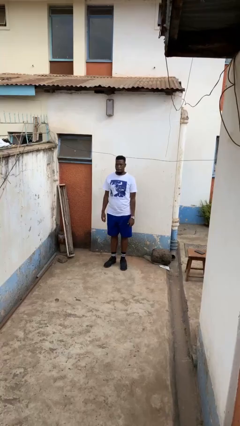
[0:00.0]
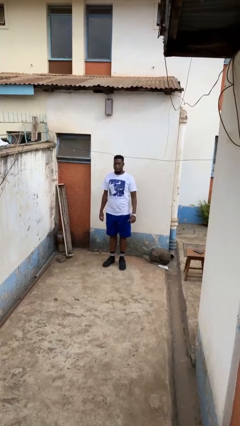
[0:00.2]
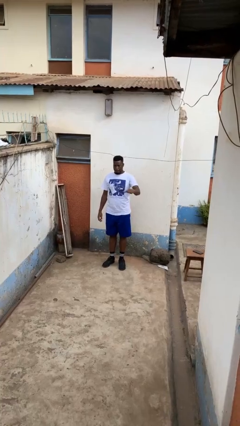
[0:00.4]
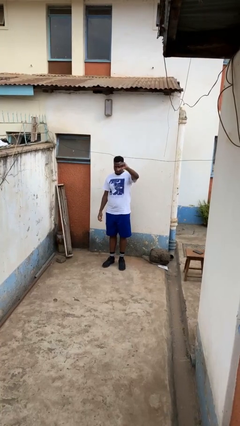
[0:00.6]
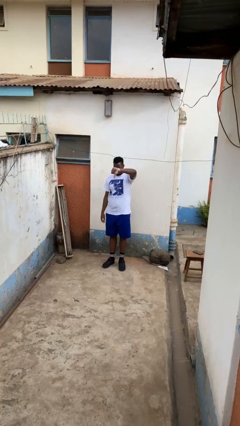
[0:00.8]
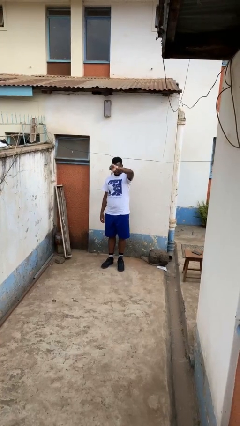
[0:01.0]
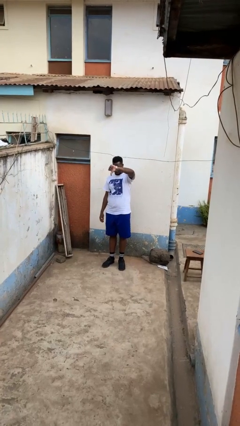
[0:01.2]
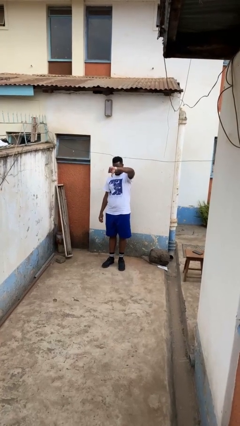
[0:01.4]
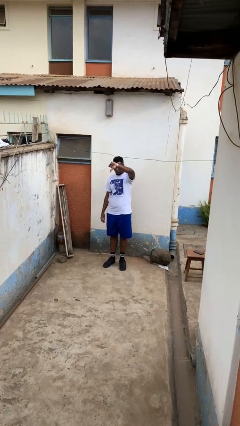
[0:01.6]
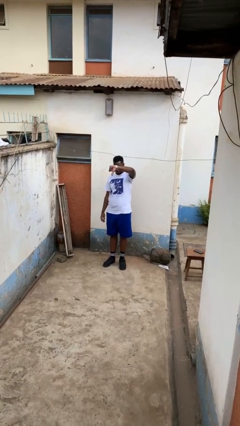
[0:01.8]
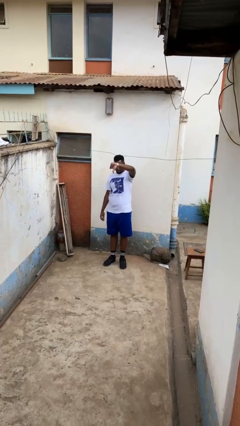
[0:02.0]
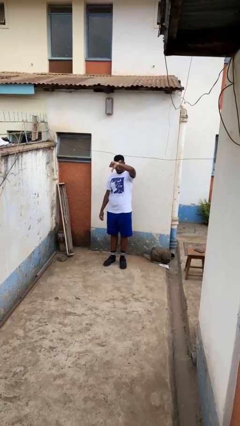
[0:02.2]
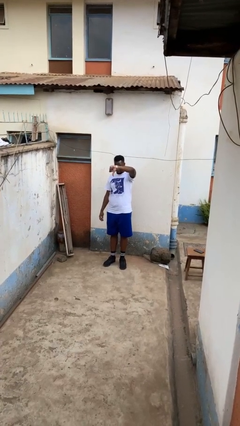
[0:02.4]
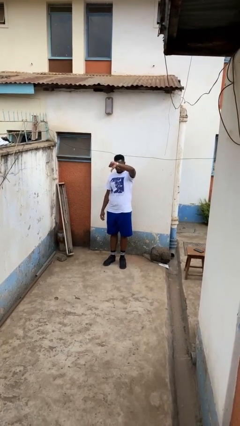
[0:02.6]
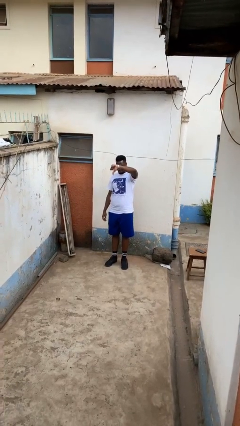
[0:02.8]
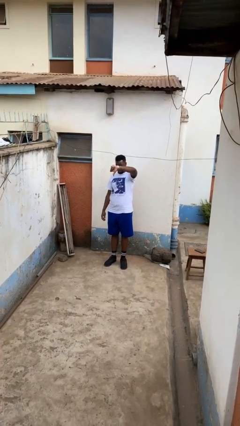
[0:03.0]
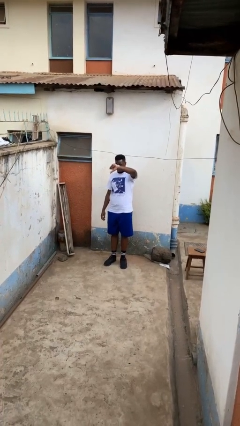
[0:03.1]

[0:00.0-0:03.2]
person gestures thumbs down

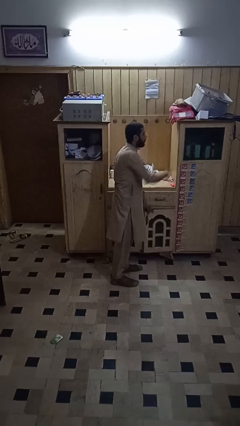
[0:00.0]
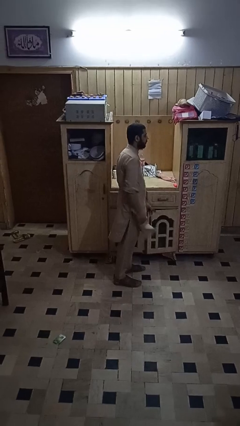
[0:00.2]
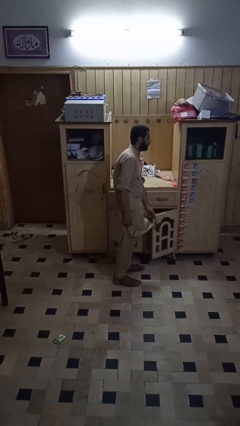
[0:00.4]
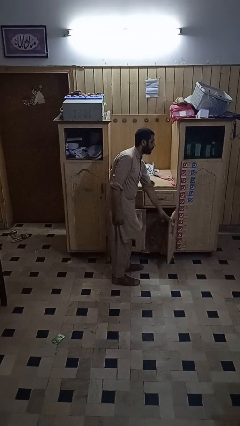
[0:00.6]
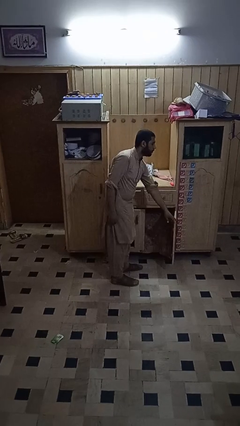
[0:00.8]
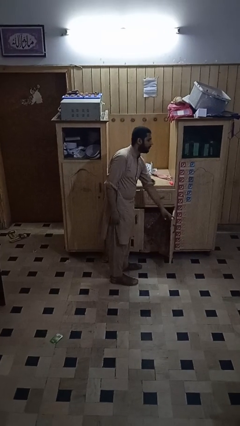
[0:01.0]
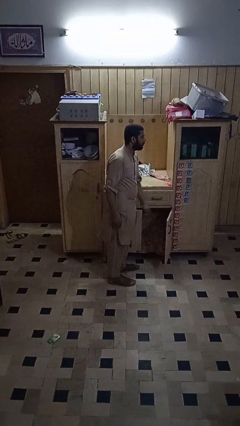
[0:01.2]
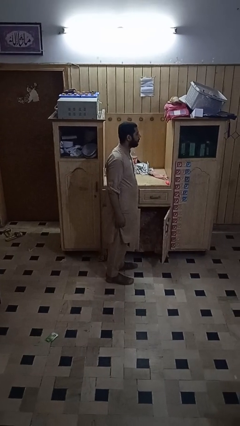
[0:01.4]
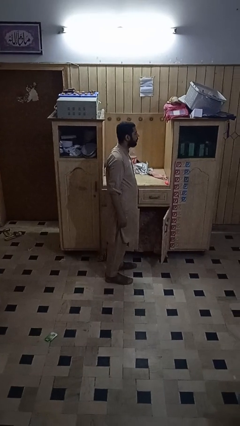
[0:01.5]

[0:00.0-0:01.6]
person closes cabinet

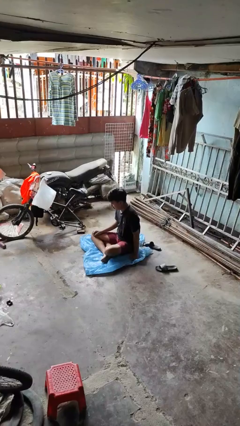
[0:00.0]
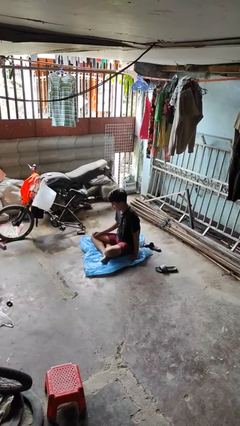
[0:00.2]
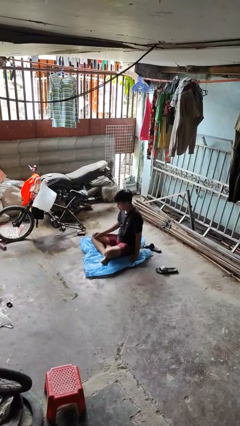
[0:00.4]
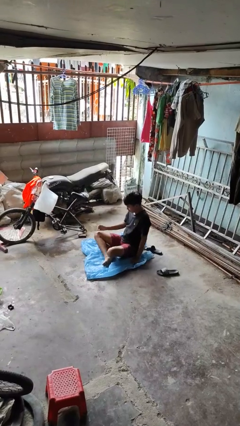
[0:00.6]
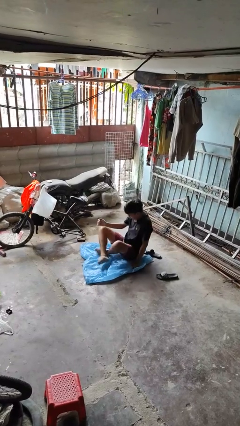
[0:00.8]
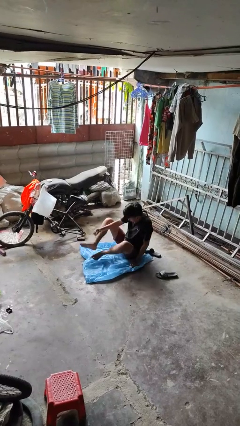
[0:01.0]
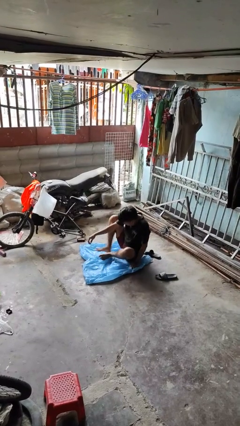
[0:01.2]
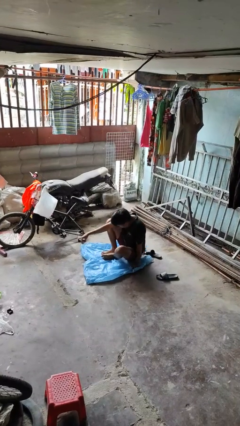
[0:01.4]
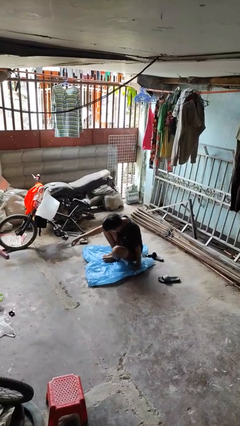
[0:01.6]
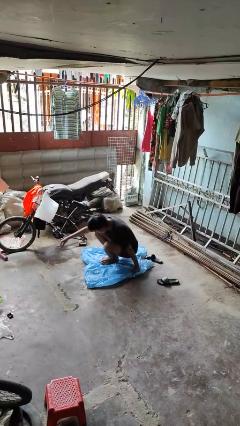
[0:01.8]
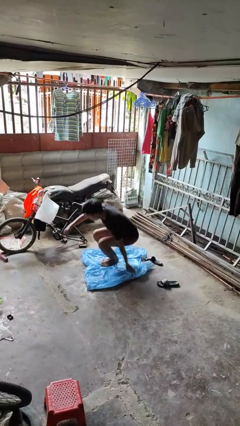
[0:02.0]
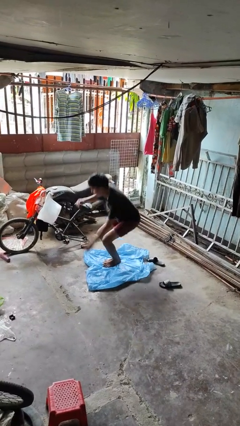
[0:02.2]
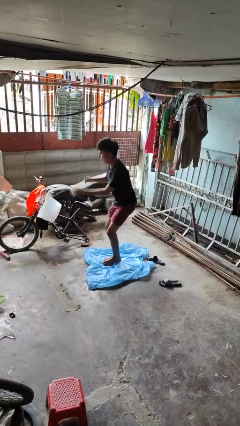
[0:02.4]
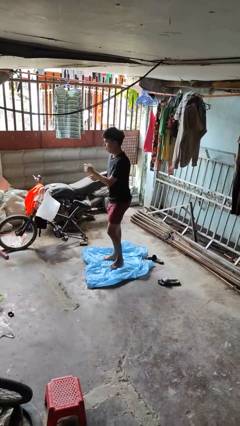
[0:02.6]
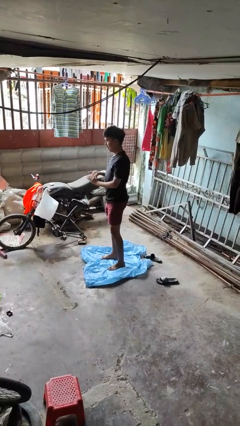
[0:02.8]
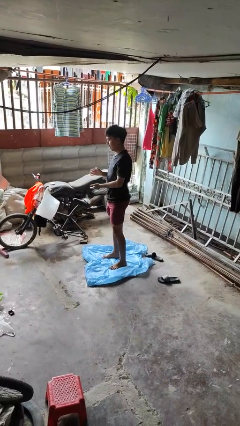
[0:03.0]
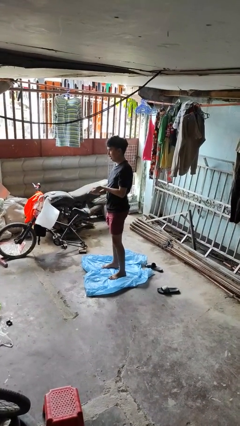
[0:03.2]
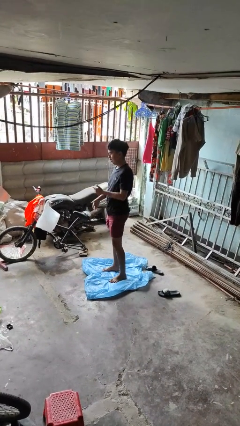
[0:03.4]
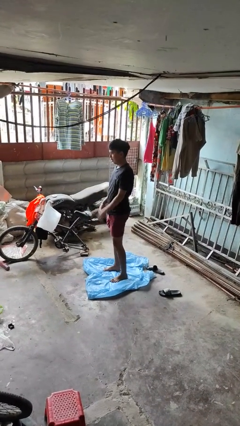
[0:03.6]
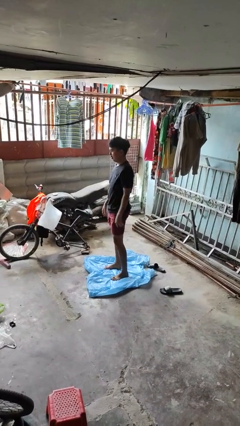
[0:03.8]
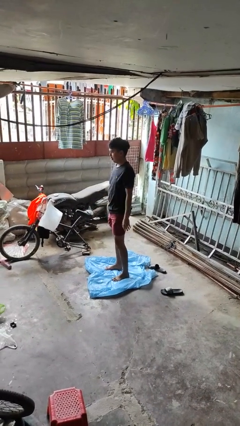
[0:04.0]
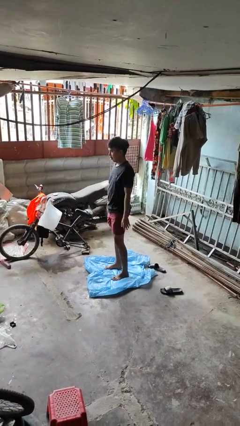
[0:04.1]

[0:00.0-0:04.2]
person stands up from floor

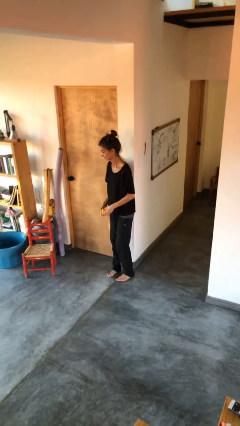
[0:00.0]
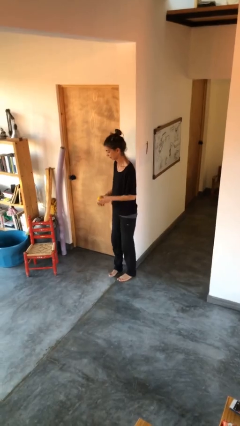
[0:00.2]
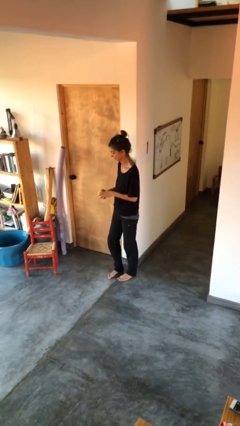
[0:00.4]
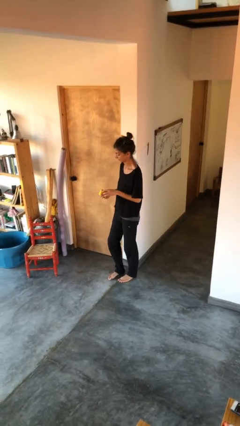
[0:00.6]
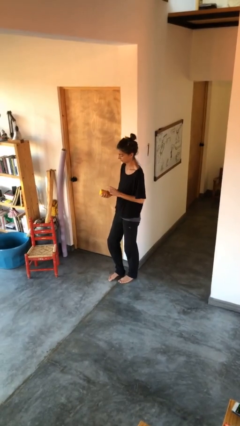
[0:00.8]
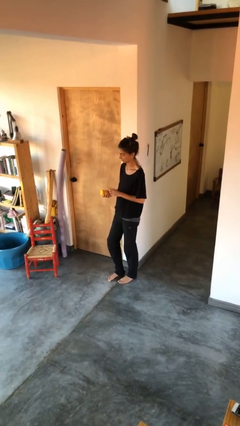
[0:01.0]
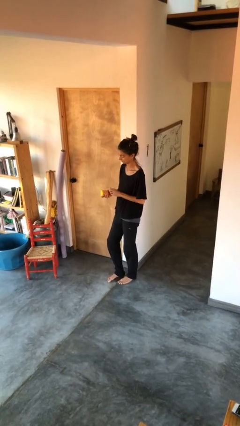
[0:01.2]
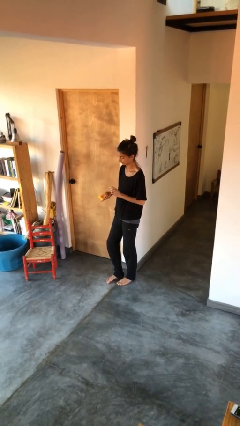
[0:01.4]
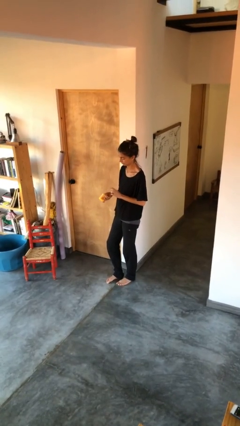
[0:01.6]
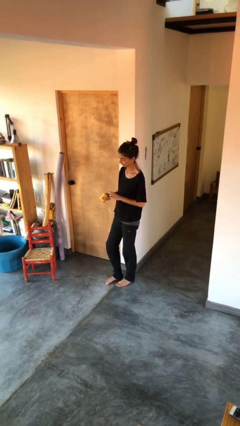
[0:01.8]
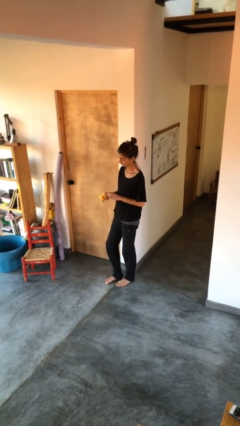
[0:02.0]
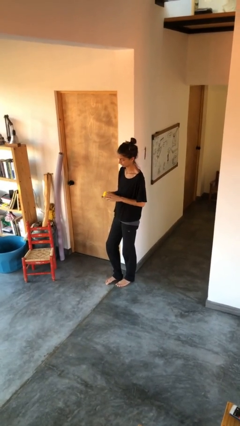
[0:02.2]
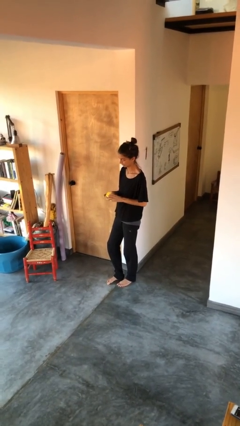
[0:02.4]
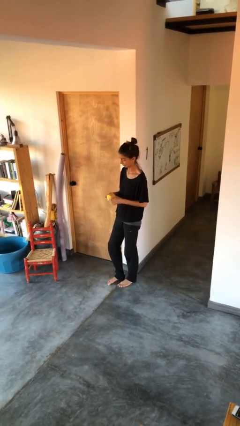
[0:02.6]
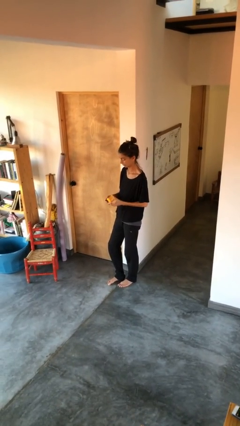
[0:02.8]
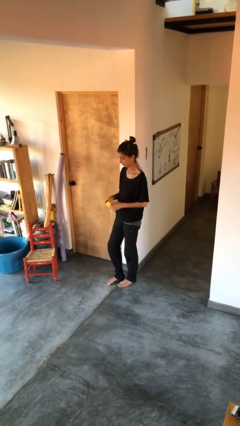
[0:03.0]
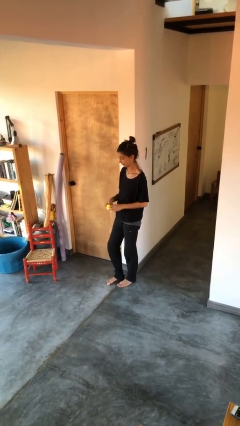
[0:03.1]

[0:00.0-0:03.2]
person taps object with finger

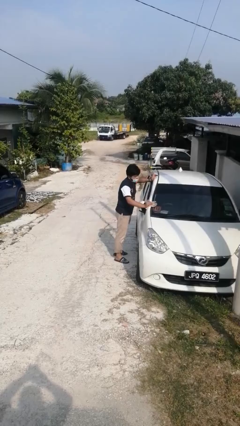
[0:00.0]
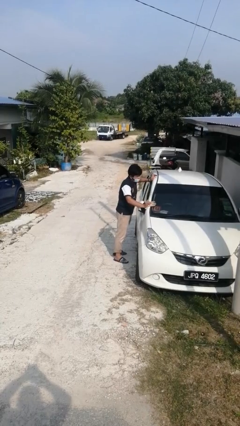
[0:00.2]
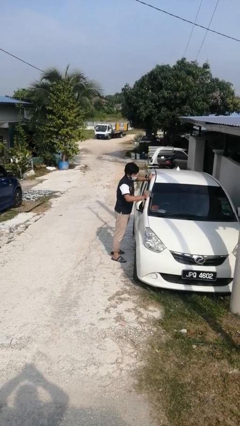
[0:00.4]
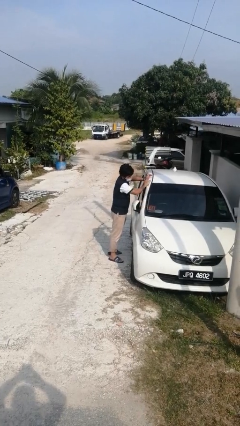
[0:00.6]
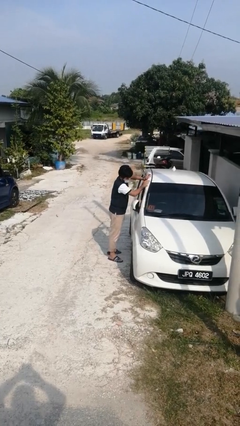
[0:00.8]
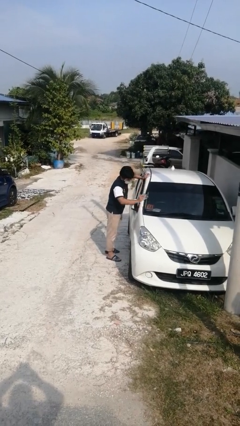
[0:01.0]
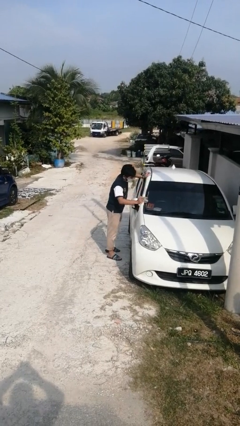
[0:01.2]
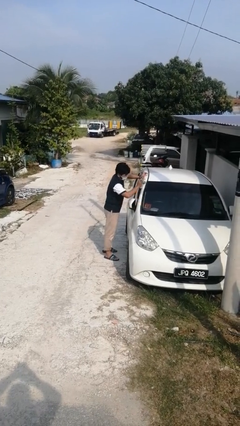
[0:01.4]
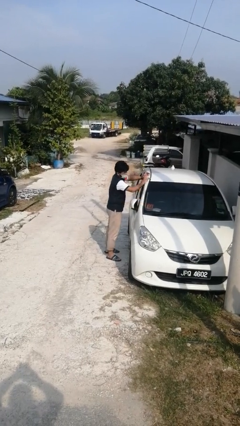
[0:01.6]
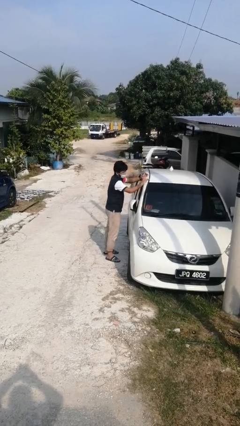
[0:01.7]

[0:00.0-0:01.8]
person polishes car with rag

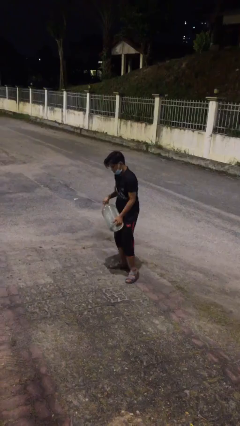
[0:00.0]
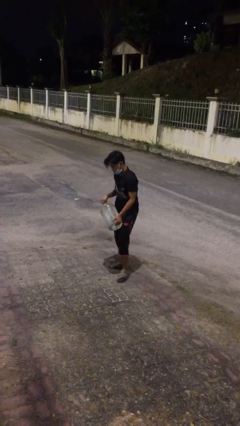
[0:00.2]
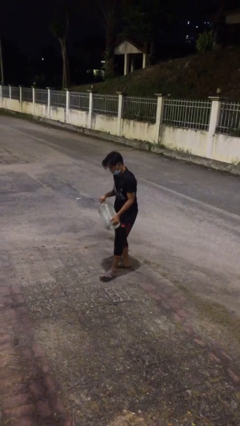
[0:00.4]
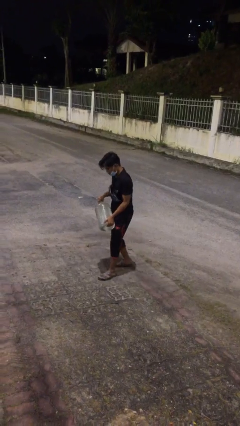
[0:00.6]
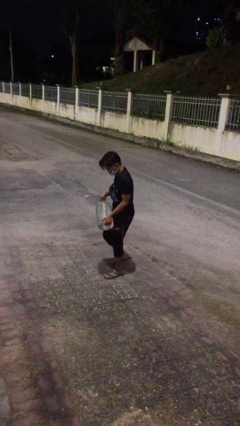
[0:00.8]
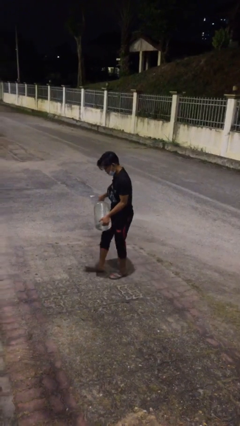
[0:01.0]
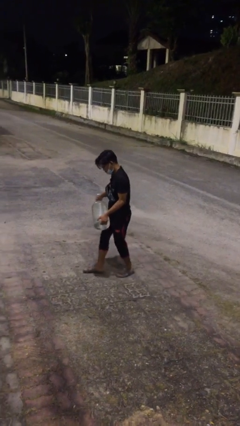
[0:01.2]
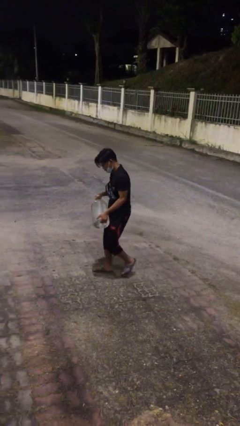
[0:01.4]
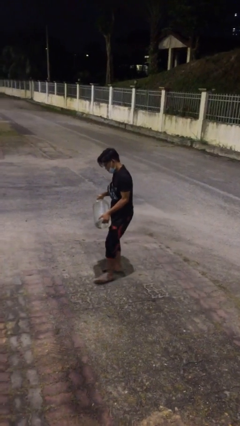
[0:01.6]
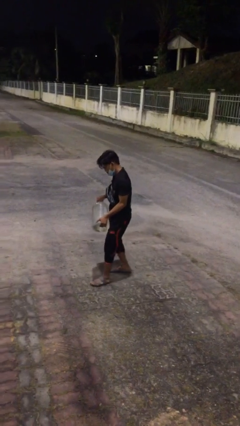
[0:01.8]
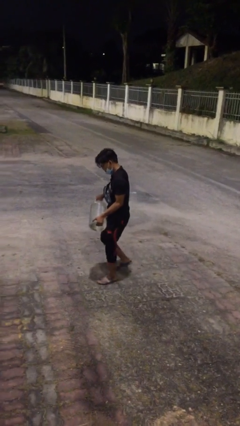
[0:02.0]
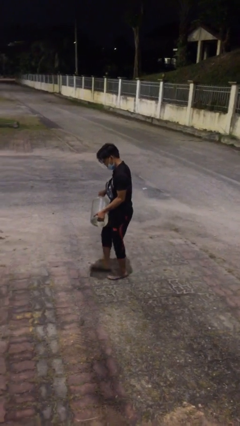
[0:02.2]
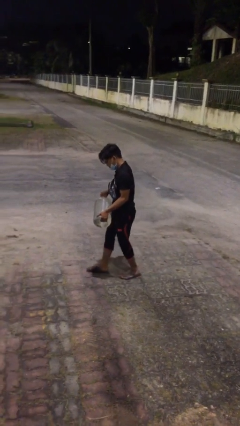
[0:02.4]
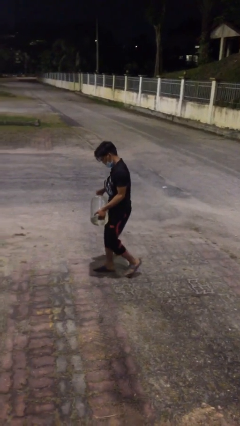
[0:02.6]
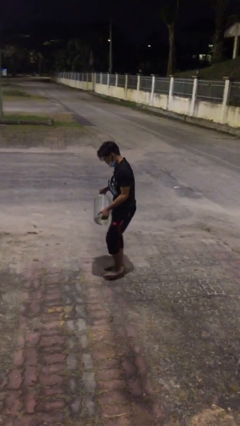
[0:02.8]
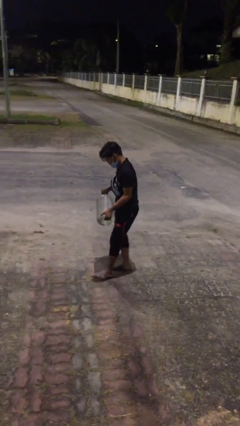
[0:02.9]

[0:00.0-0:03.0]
person carries heavy object
